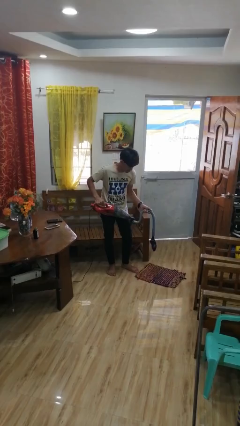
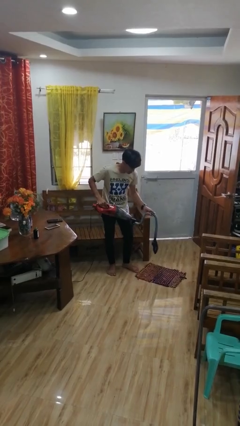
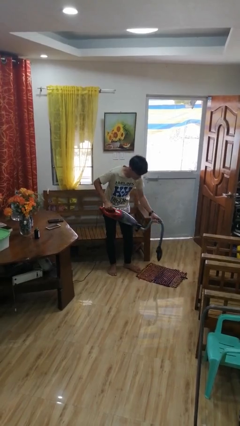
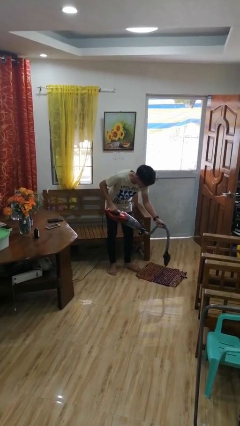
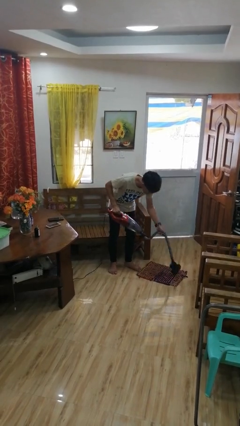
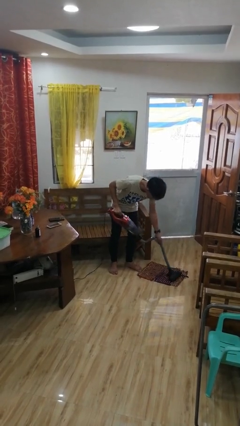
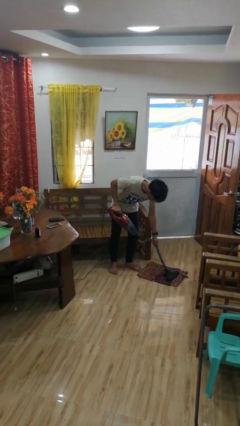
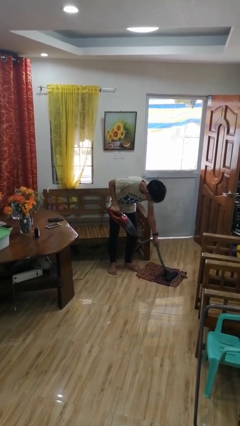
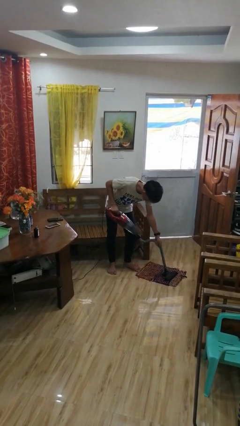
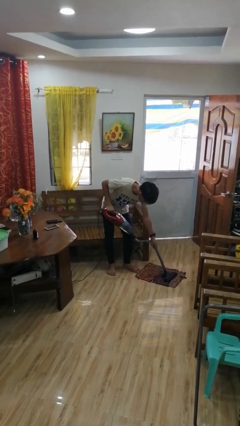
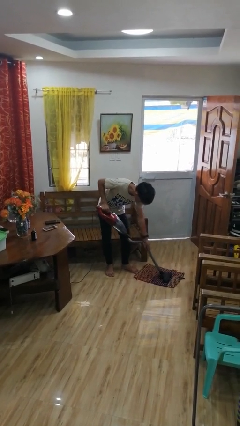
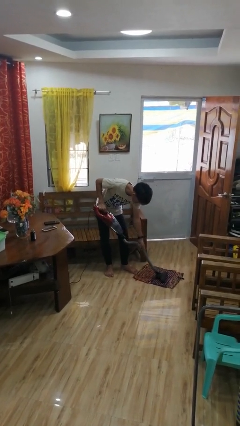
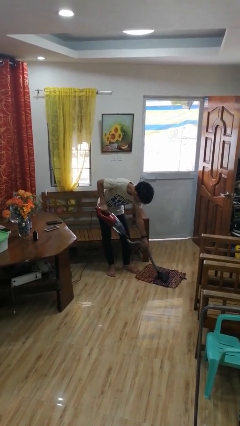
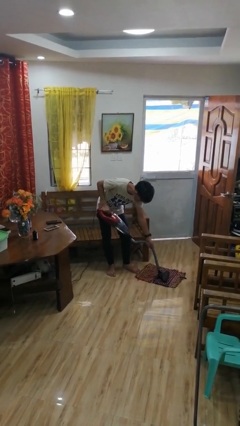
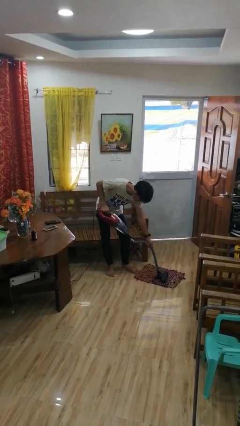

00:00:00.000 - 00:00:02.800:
person vacuums carpet

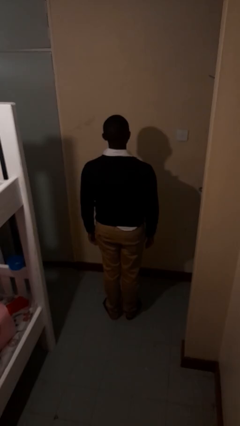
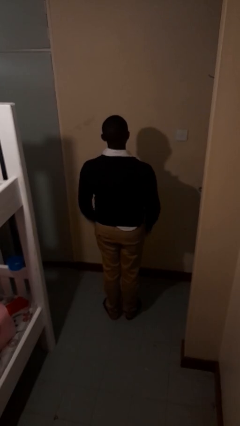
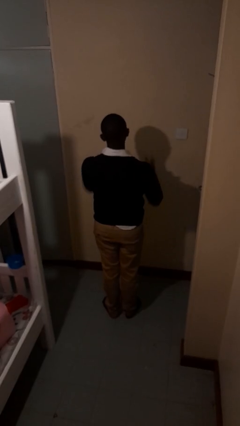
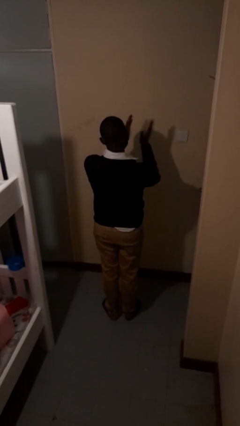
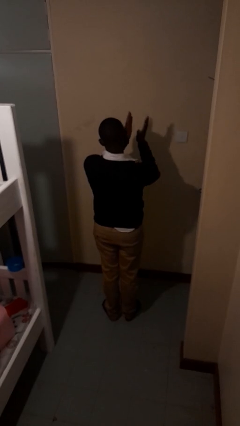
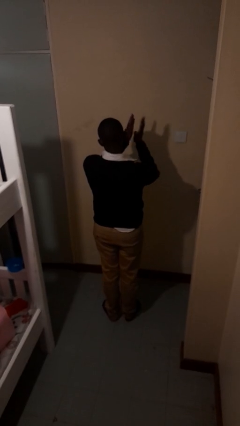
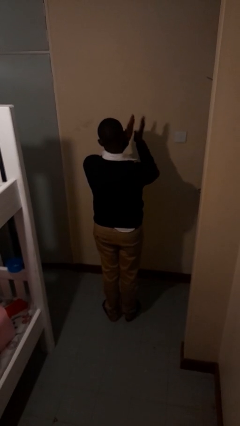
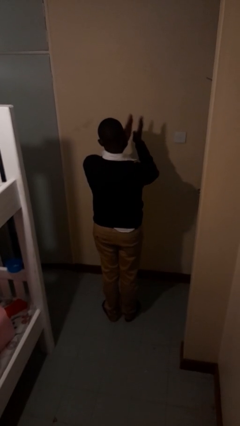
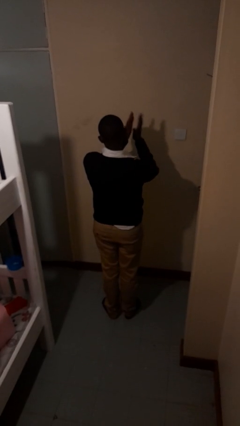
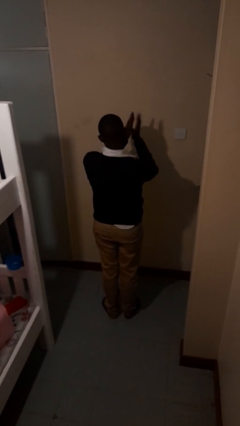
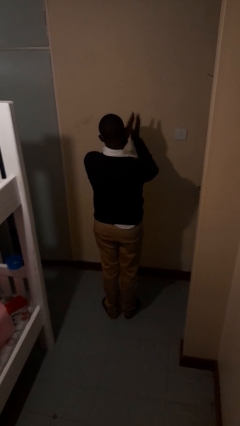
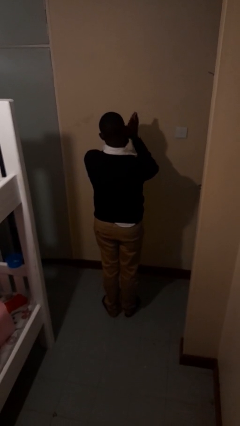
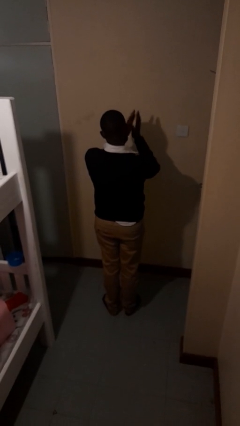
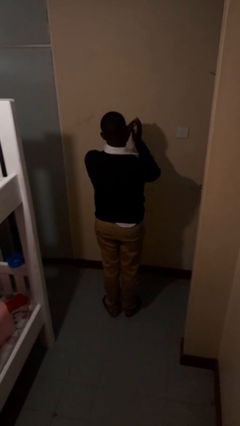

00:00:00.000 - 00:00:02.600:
person claps hands

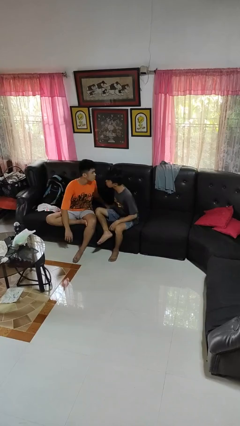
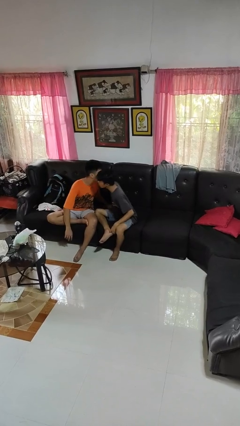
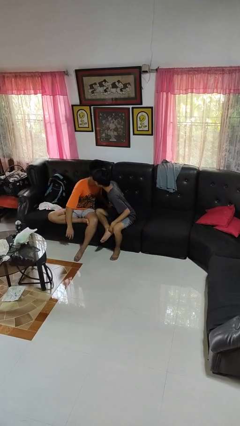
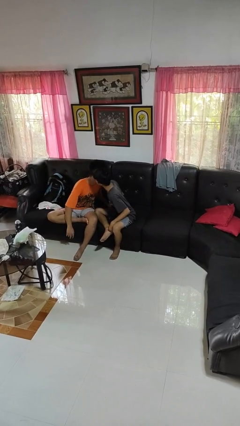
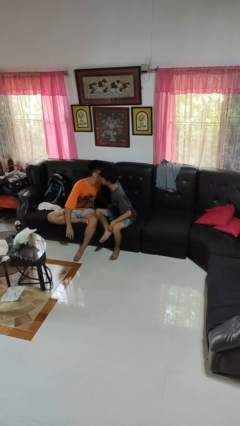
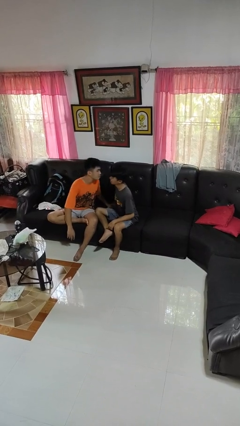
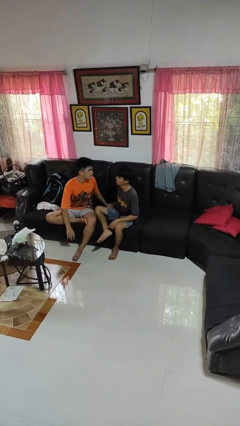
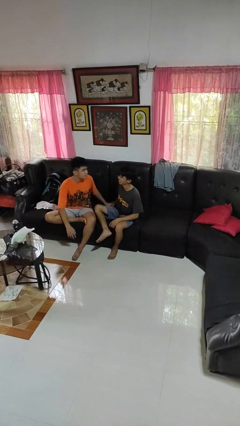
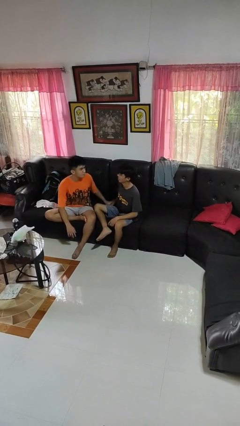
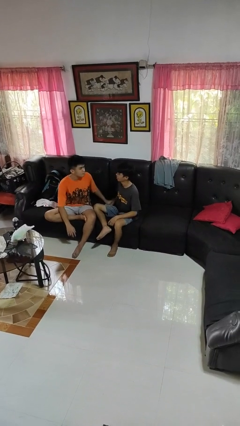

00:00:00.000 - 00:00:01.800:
person kisses cheek of person

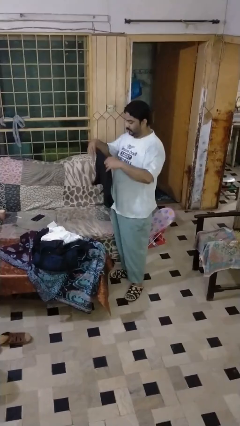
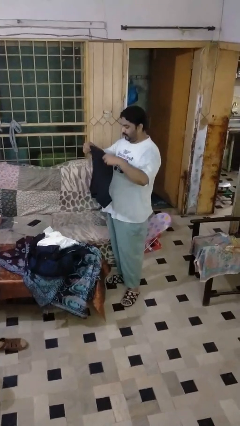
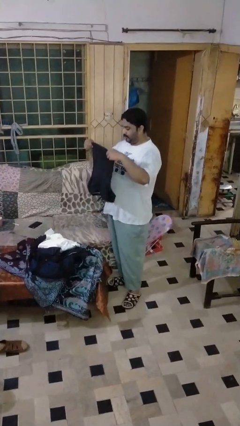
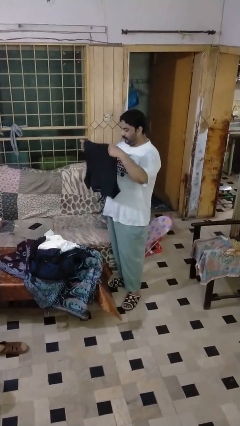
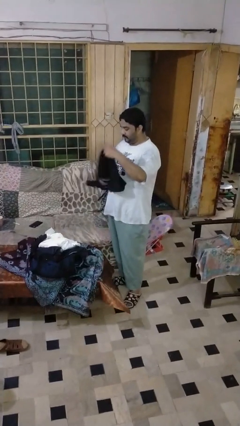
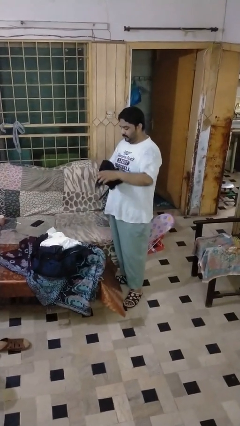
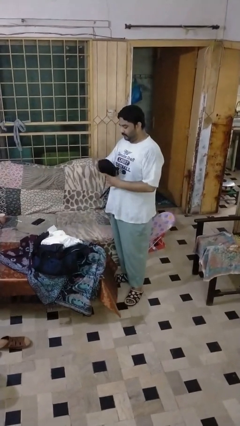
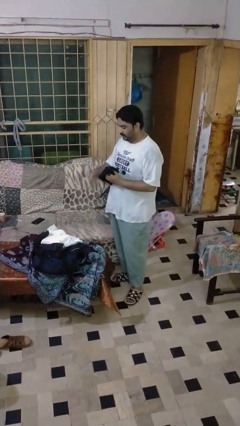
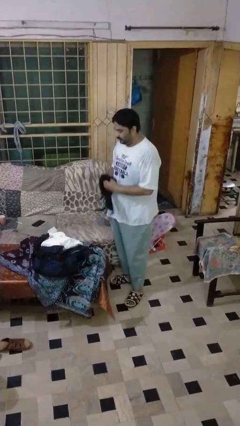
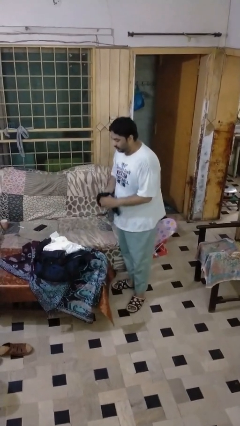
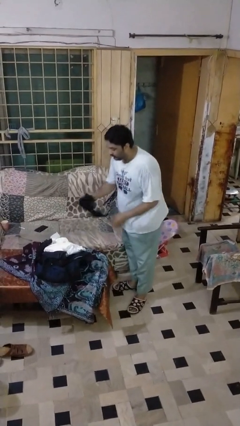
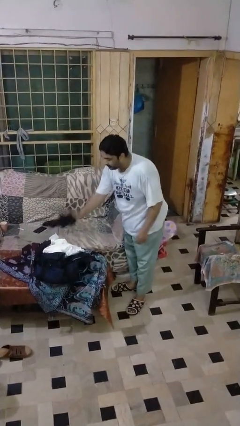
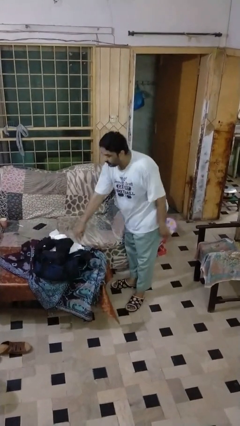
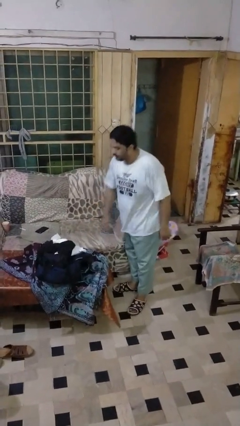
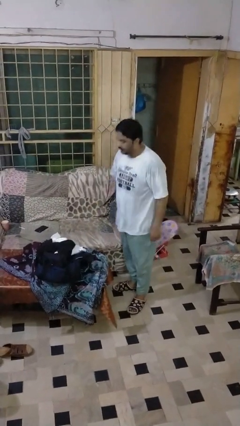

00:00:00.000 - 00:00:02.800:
person folds shirt

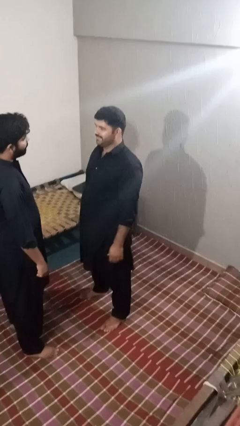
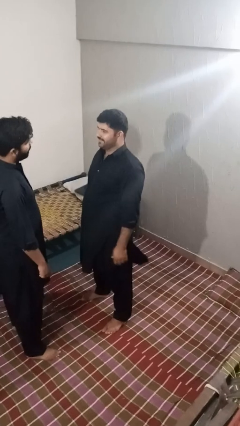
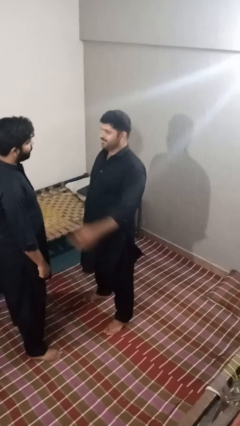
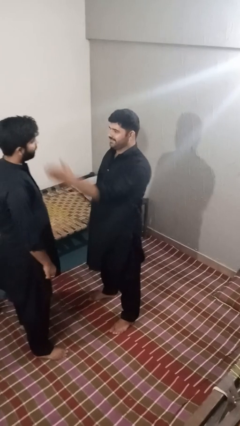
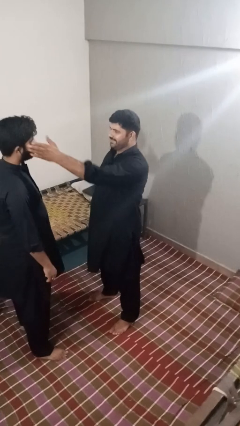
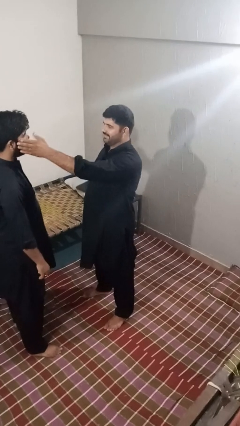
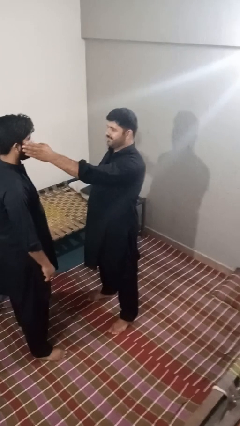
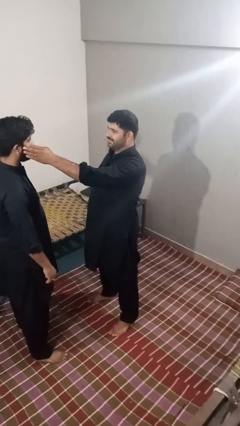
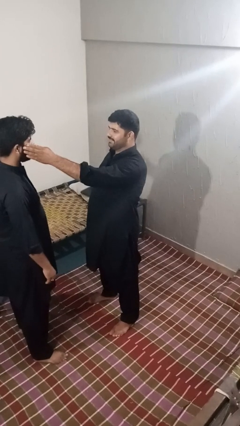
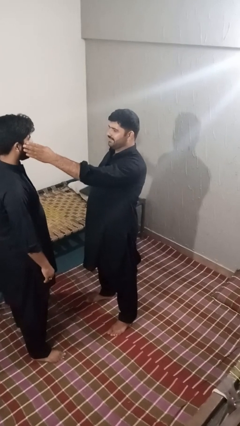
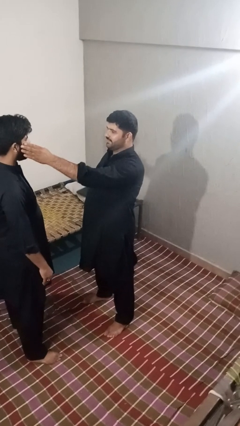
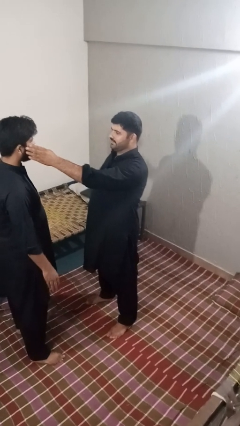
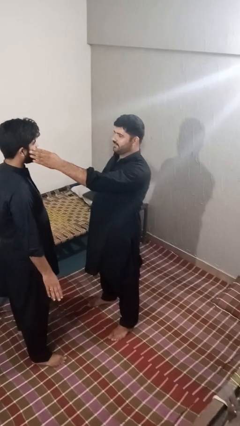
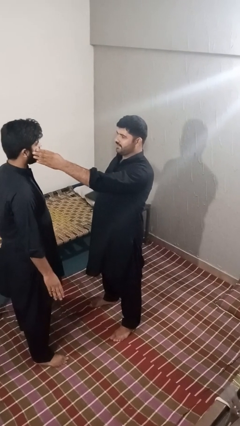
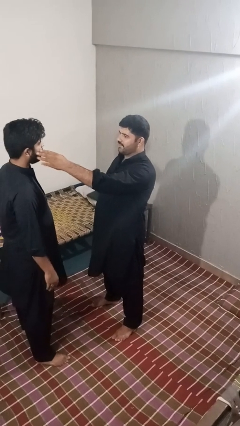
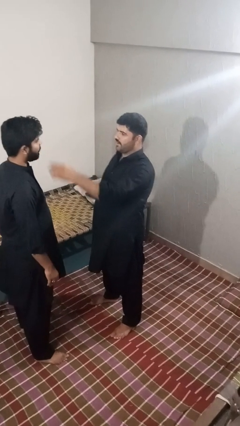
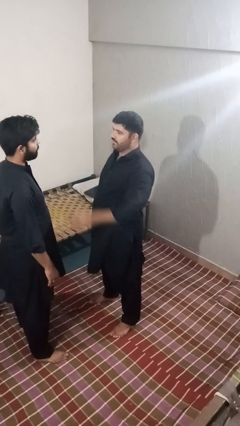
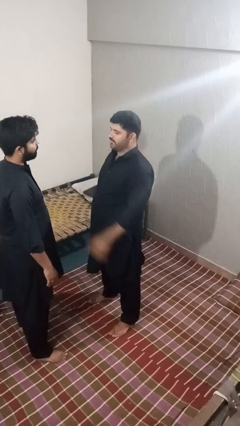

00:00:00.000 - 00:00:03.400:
person touches face of person

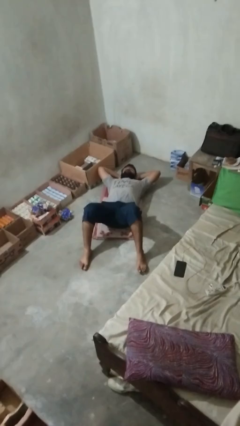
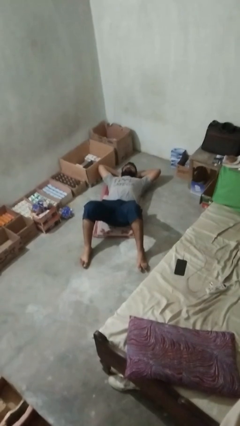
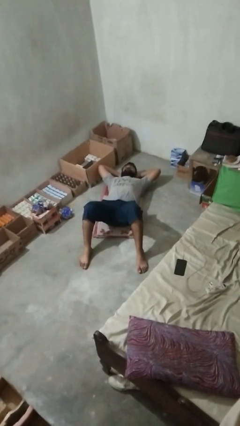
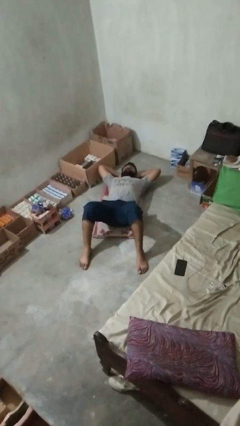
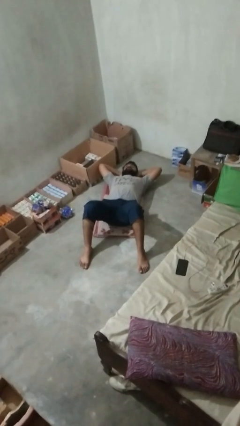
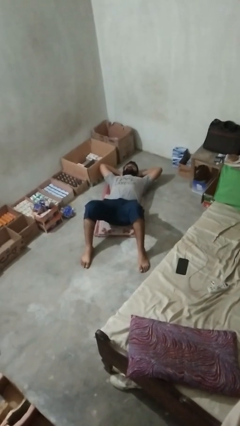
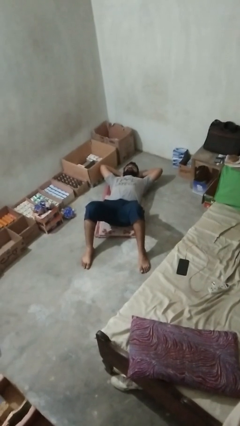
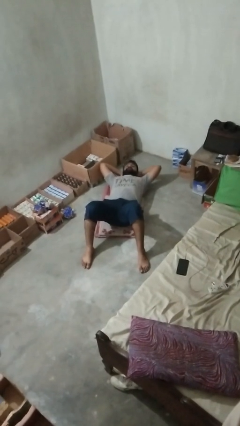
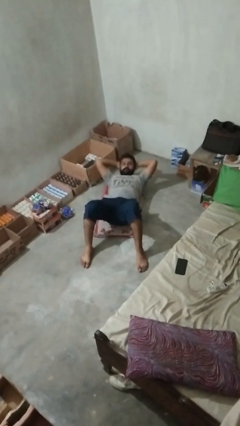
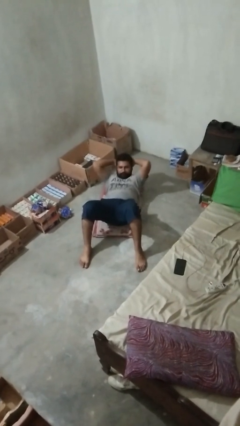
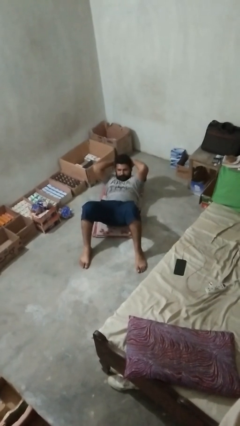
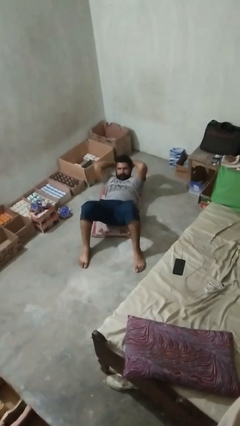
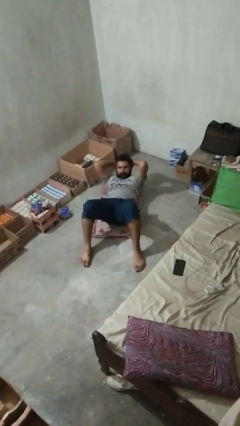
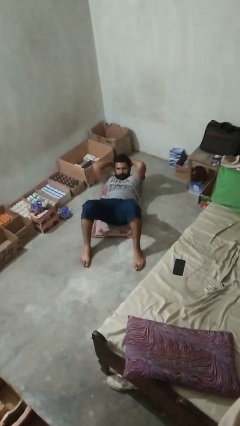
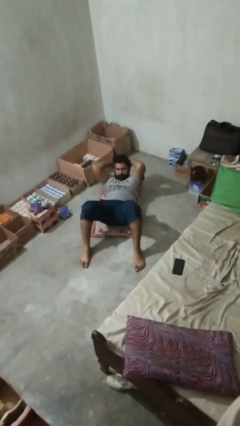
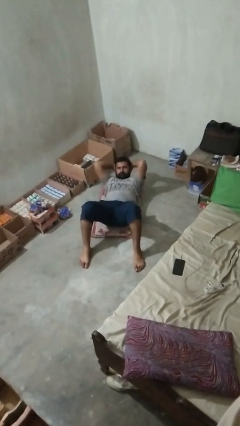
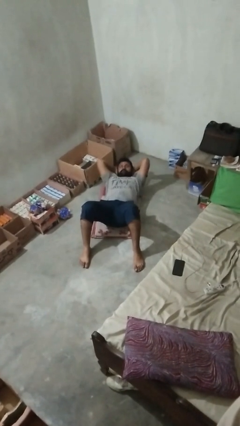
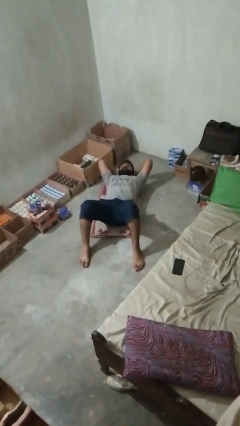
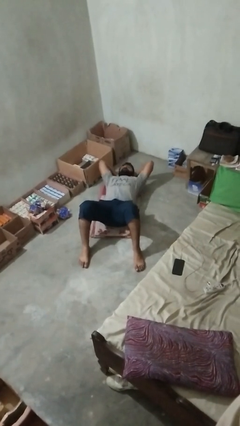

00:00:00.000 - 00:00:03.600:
person exercises with situp

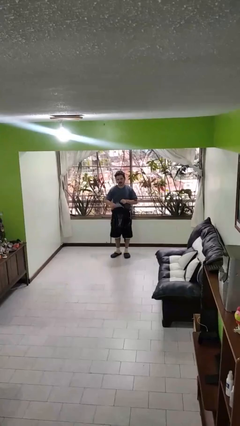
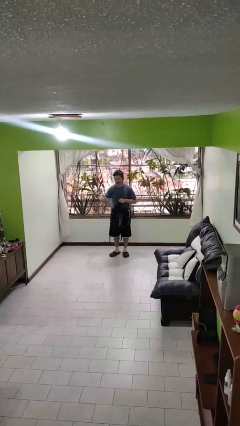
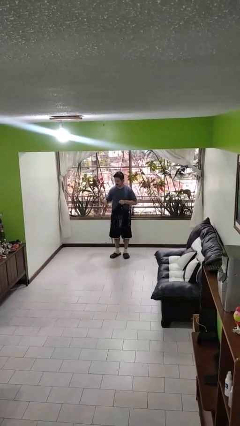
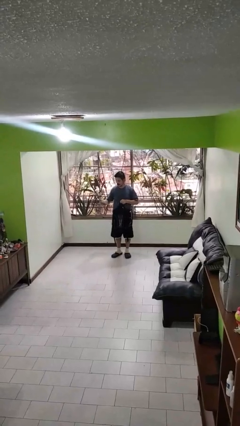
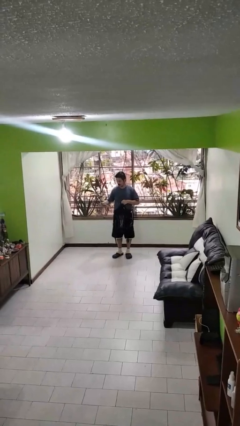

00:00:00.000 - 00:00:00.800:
person takes object from backpack
